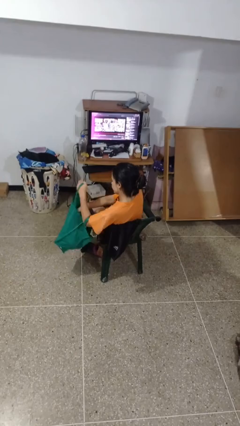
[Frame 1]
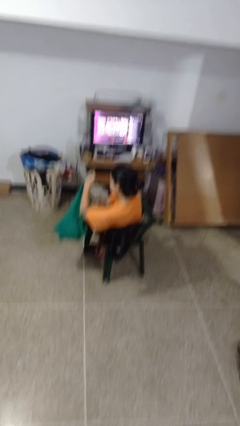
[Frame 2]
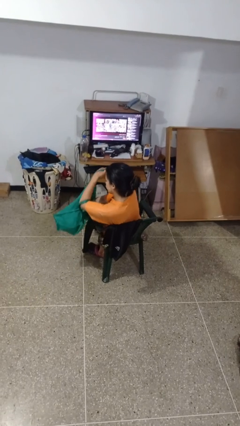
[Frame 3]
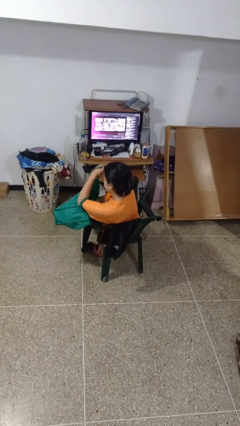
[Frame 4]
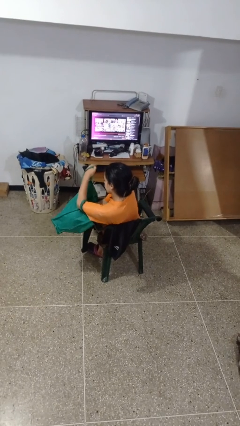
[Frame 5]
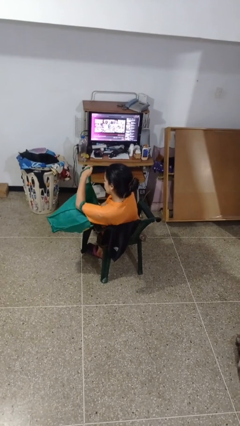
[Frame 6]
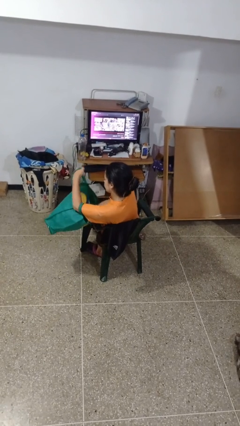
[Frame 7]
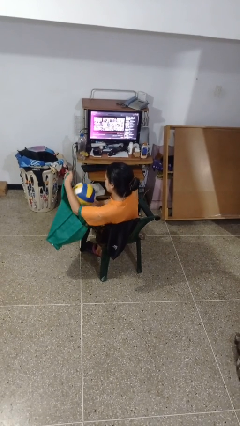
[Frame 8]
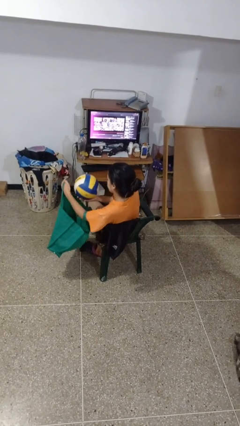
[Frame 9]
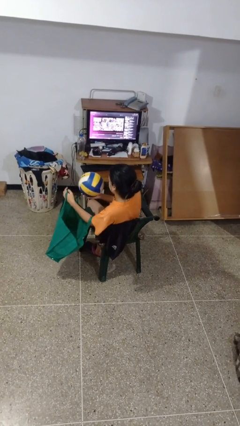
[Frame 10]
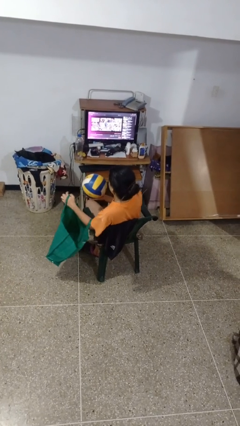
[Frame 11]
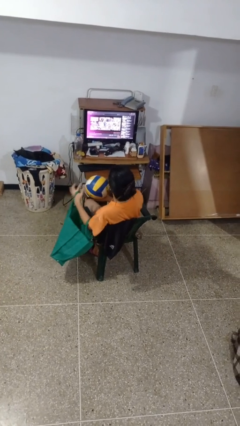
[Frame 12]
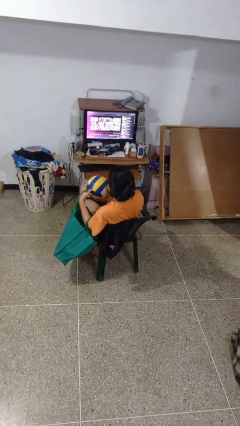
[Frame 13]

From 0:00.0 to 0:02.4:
person takes object from bag

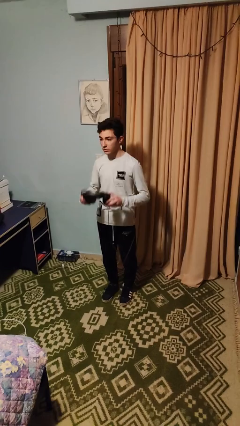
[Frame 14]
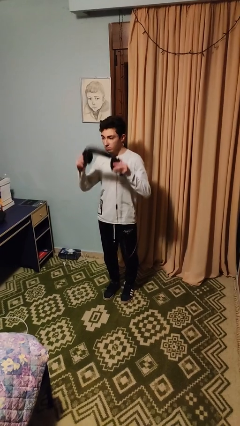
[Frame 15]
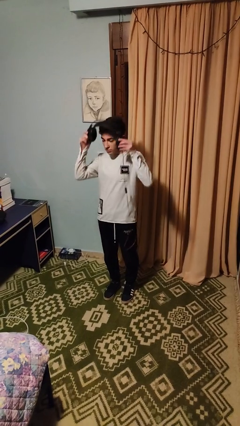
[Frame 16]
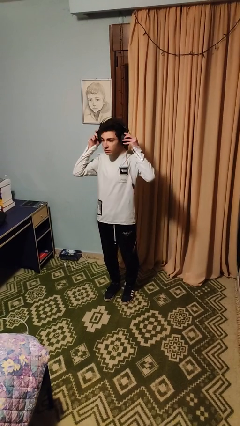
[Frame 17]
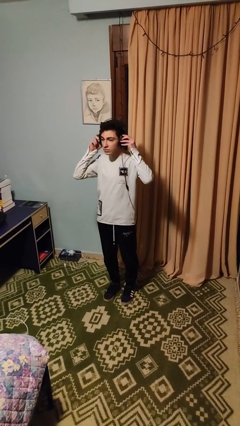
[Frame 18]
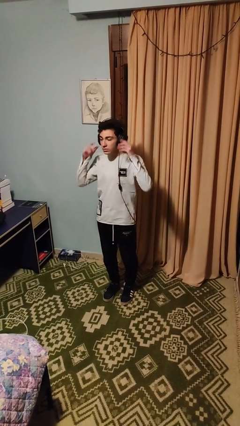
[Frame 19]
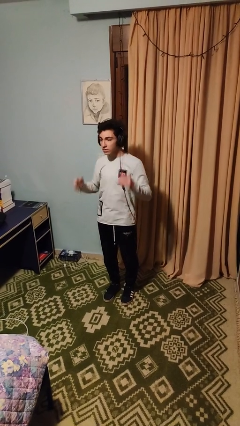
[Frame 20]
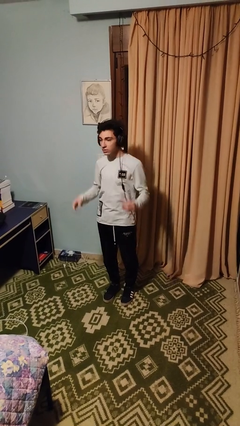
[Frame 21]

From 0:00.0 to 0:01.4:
person puts on headphones

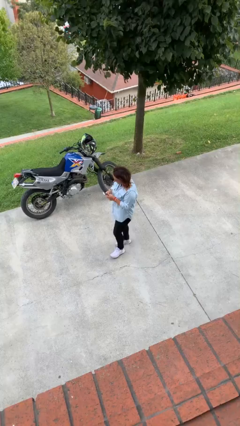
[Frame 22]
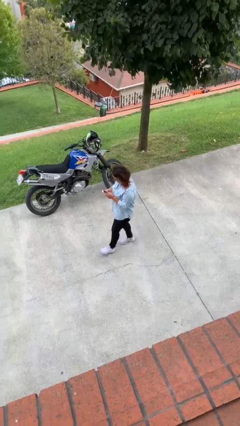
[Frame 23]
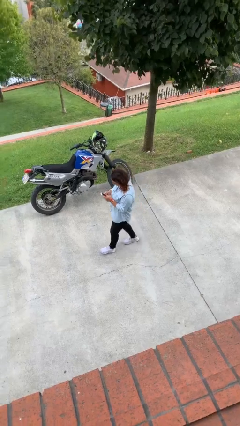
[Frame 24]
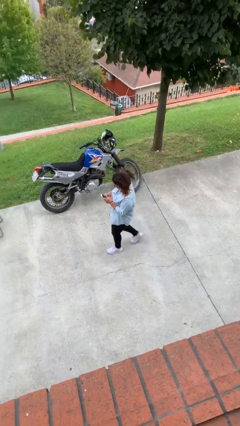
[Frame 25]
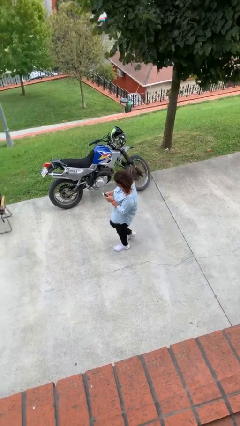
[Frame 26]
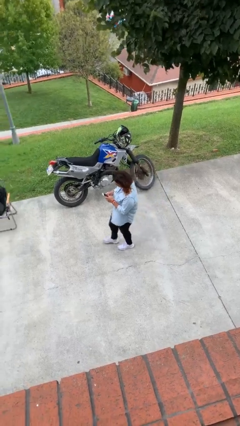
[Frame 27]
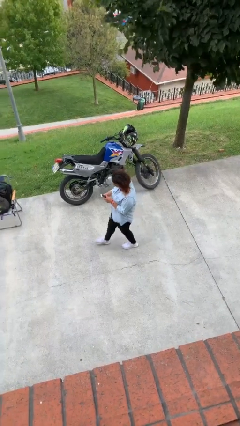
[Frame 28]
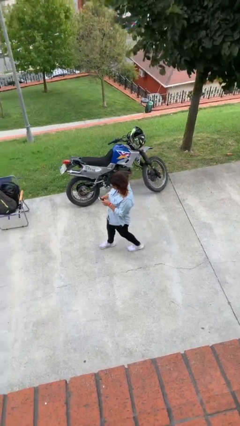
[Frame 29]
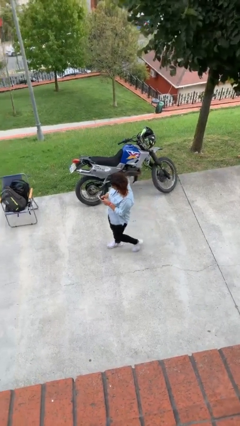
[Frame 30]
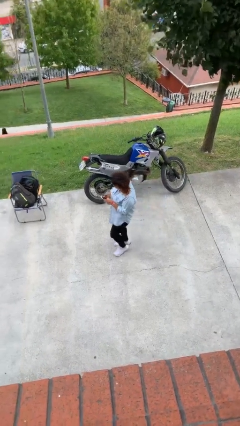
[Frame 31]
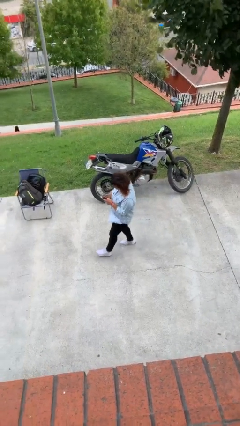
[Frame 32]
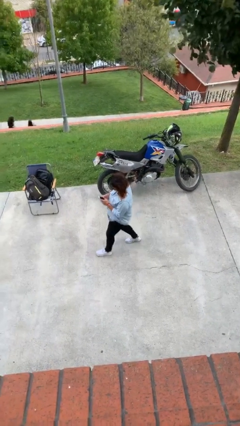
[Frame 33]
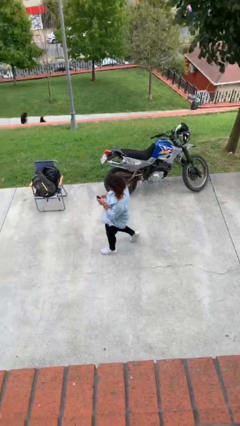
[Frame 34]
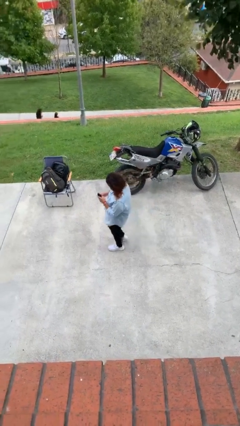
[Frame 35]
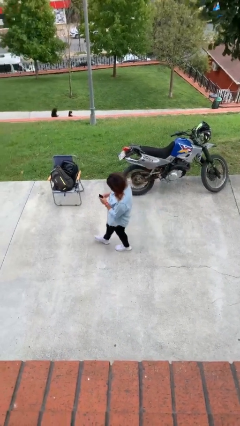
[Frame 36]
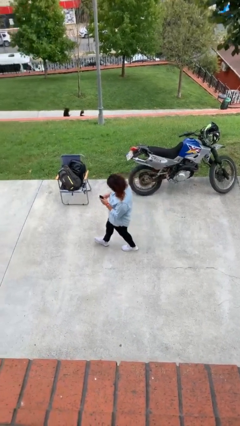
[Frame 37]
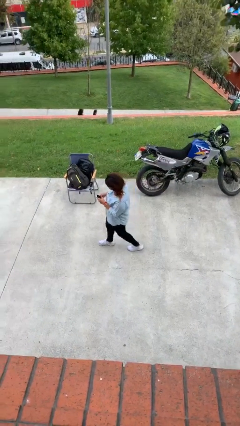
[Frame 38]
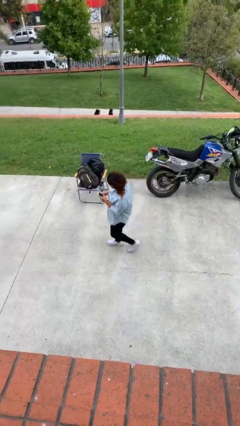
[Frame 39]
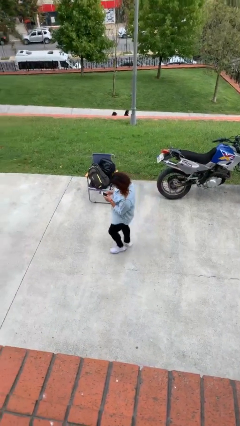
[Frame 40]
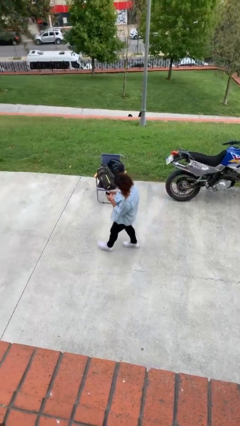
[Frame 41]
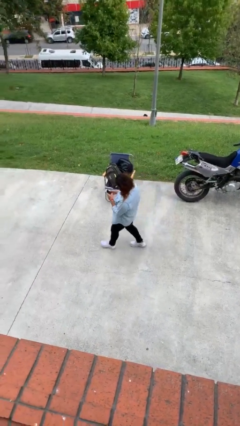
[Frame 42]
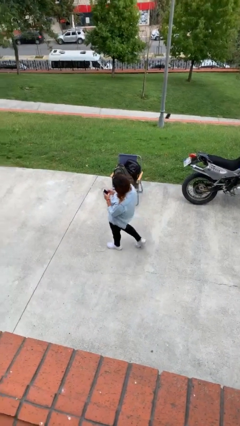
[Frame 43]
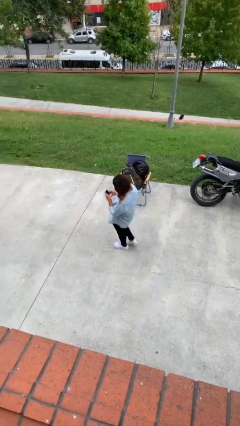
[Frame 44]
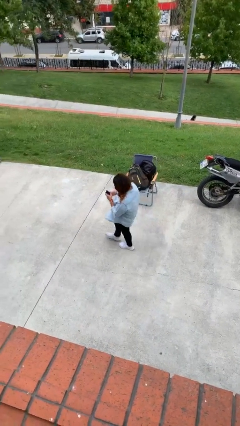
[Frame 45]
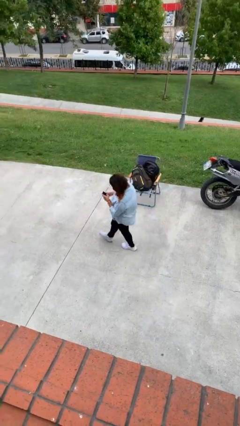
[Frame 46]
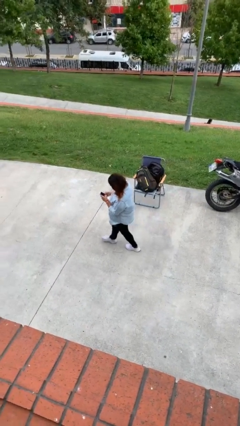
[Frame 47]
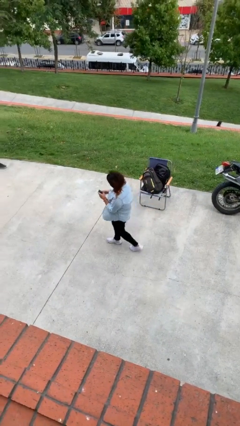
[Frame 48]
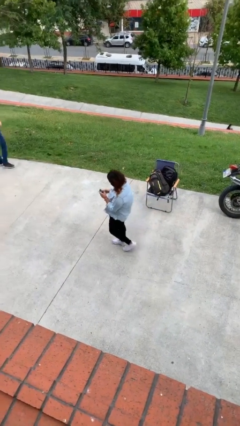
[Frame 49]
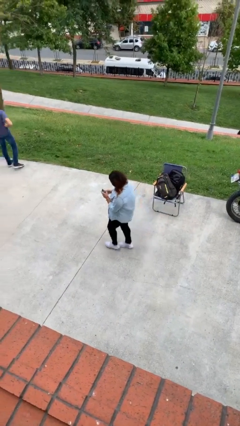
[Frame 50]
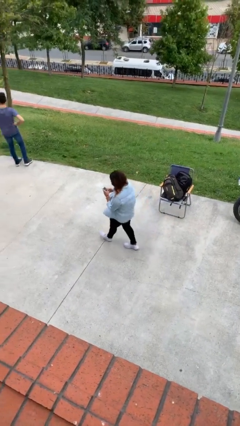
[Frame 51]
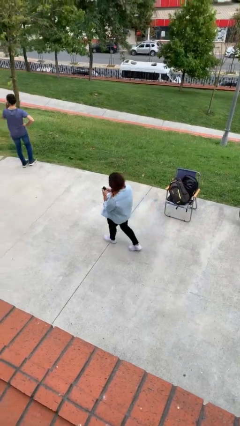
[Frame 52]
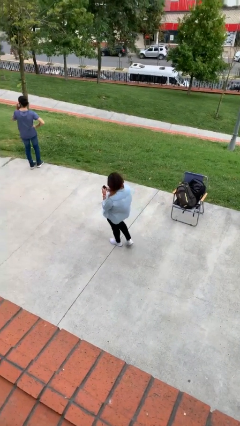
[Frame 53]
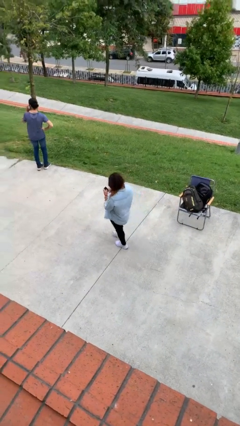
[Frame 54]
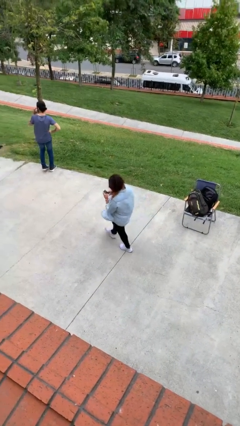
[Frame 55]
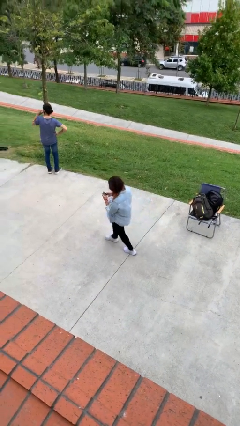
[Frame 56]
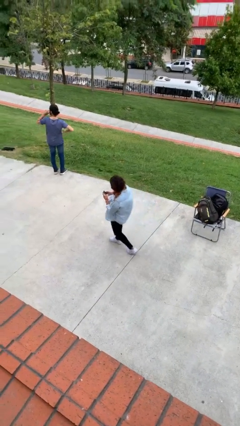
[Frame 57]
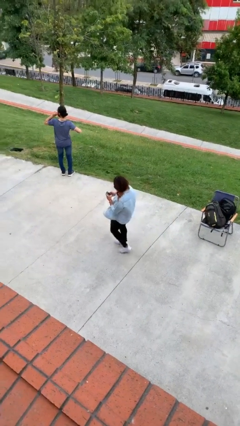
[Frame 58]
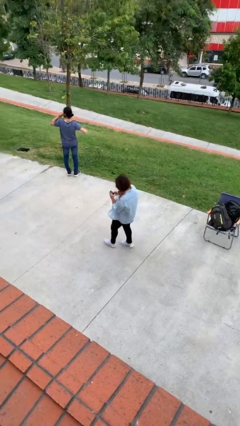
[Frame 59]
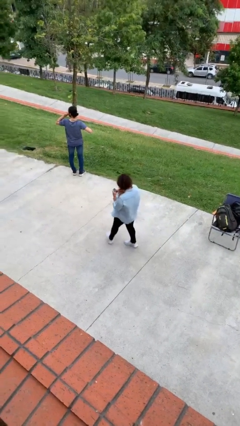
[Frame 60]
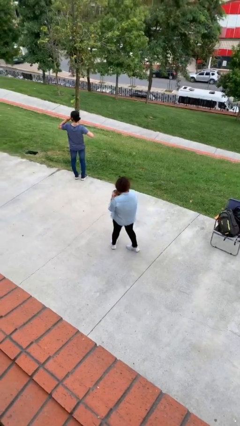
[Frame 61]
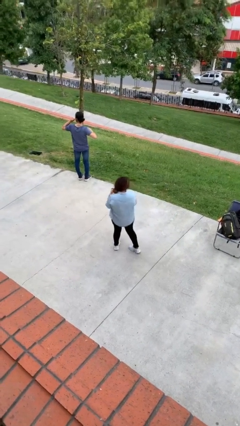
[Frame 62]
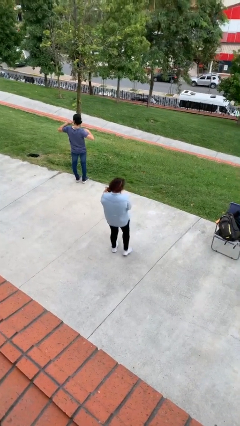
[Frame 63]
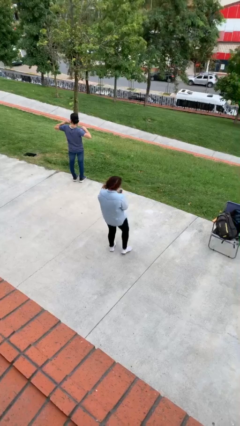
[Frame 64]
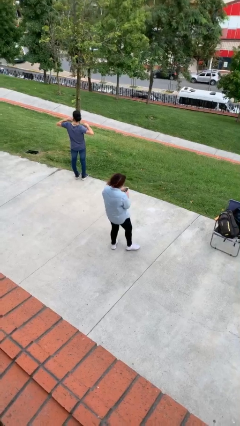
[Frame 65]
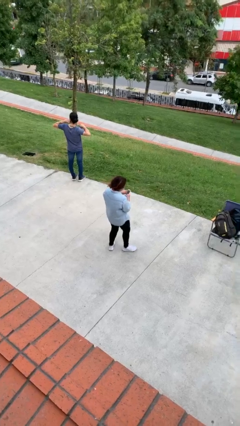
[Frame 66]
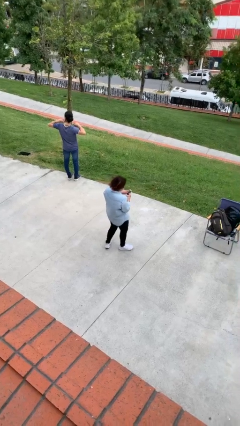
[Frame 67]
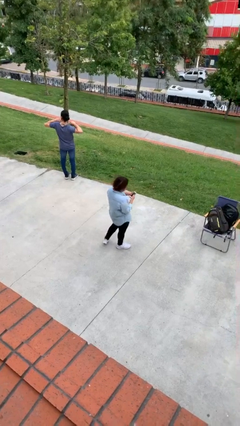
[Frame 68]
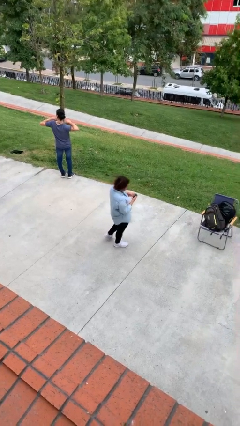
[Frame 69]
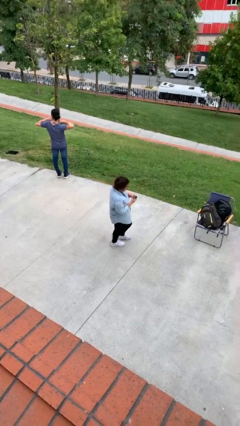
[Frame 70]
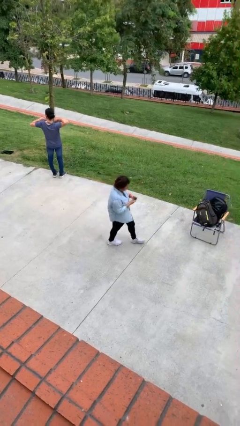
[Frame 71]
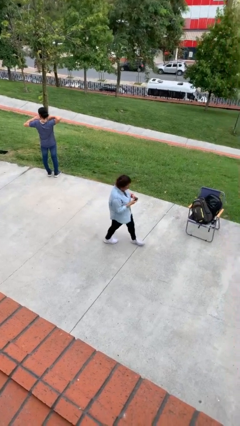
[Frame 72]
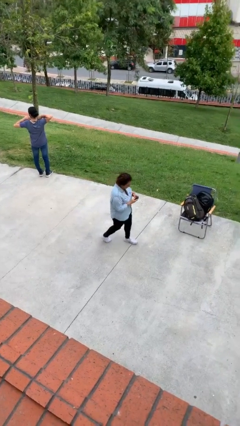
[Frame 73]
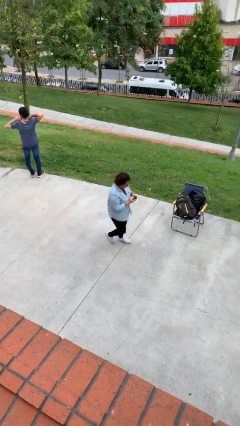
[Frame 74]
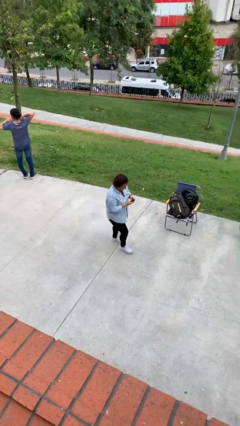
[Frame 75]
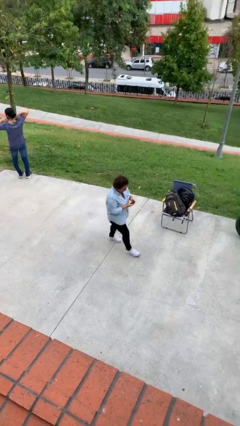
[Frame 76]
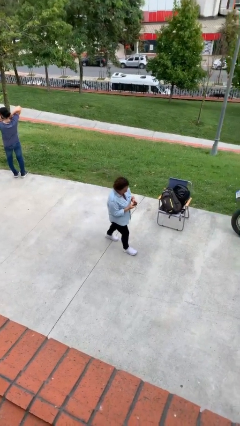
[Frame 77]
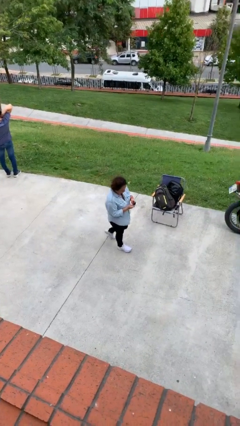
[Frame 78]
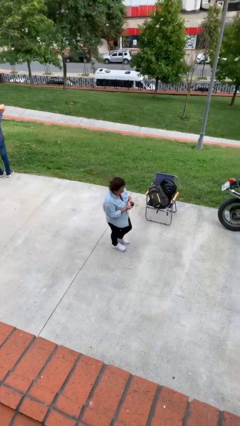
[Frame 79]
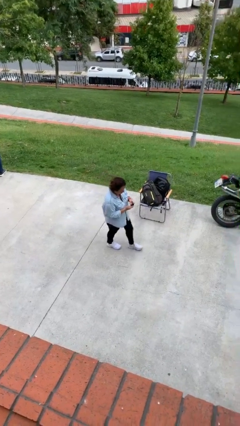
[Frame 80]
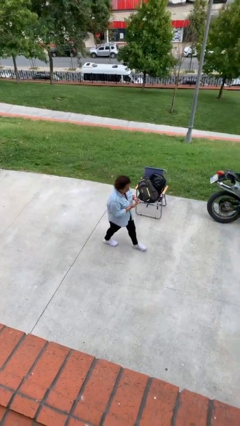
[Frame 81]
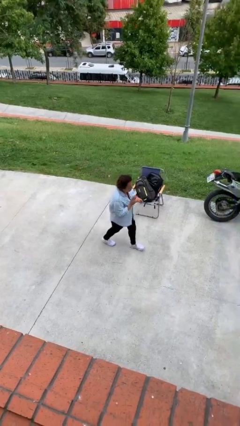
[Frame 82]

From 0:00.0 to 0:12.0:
person texts on phone

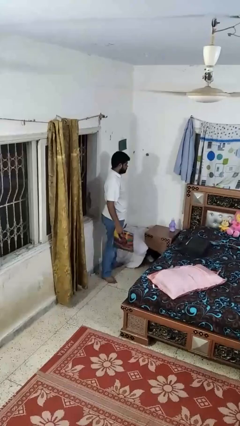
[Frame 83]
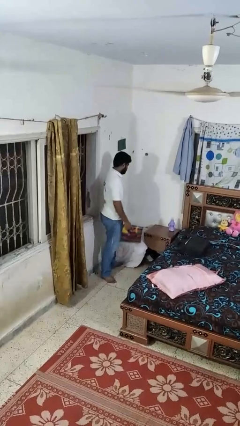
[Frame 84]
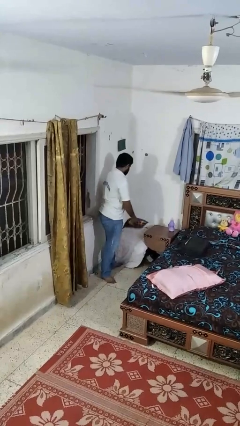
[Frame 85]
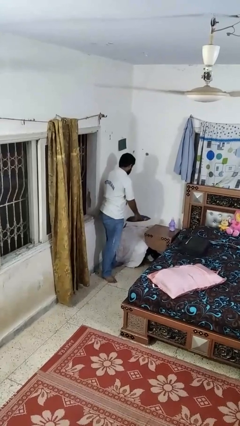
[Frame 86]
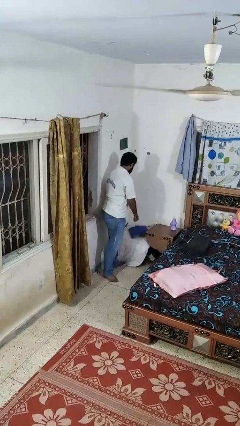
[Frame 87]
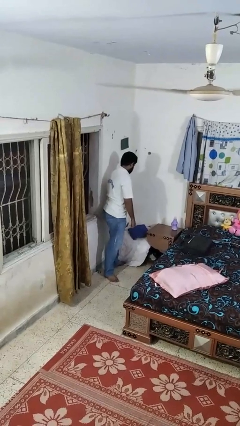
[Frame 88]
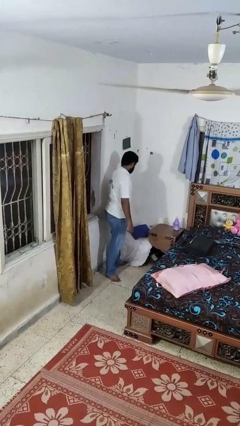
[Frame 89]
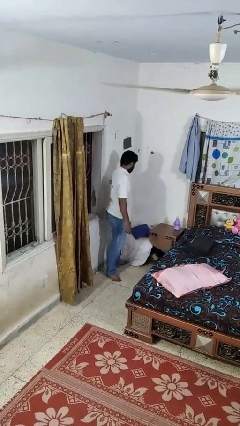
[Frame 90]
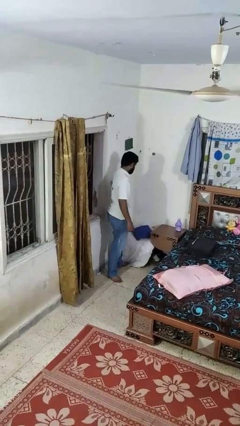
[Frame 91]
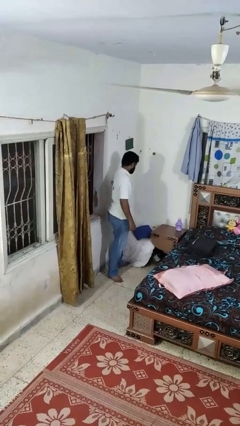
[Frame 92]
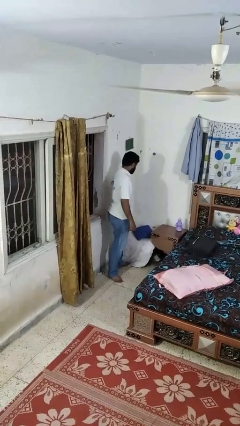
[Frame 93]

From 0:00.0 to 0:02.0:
person puts down object on couch

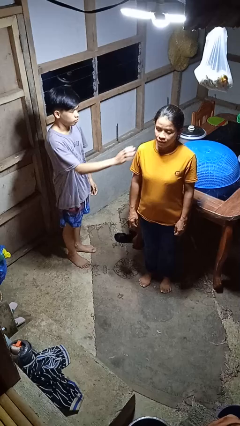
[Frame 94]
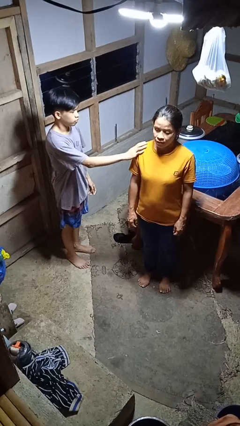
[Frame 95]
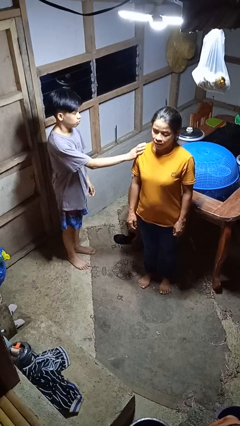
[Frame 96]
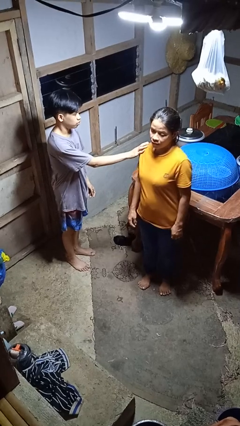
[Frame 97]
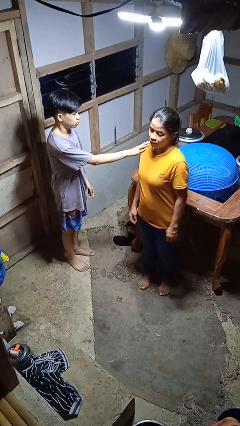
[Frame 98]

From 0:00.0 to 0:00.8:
person grabs person by bicep
